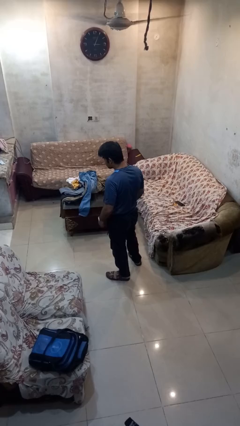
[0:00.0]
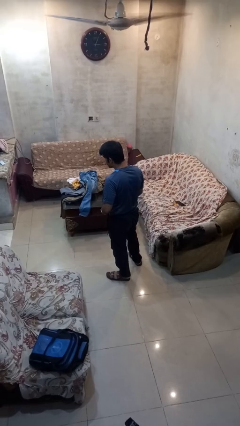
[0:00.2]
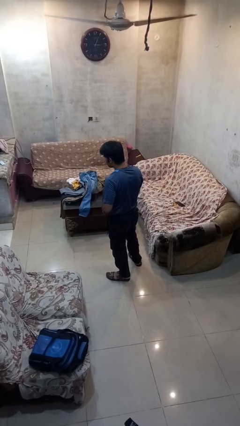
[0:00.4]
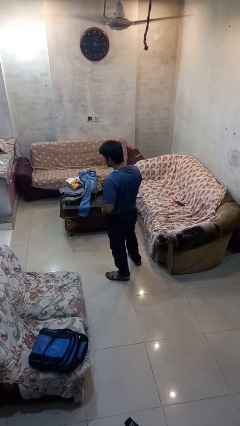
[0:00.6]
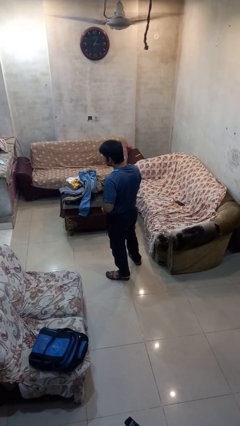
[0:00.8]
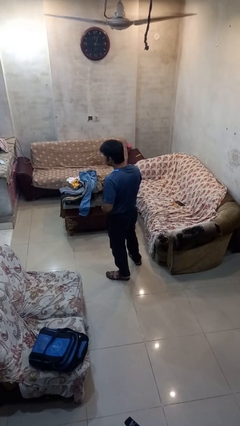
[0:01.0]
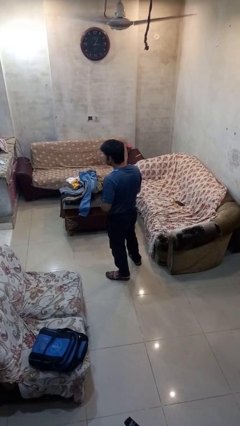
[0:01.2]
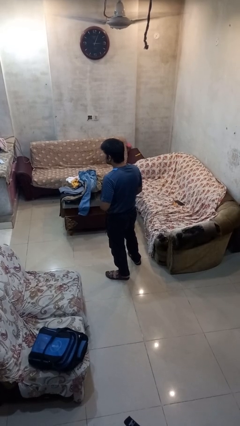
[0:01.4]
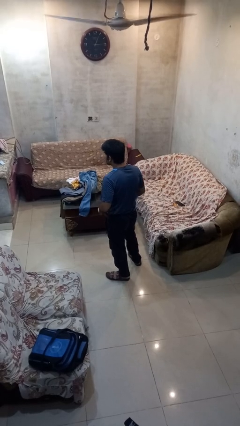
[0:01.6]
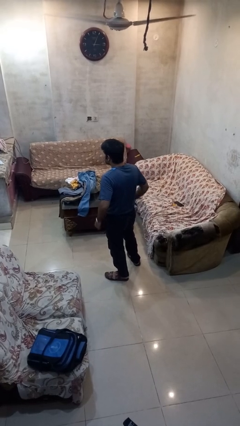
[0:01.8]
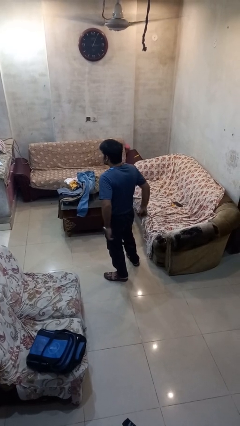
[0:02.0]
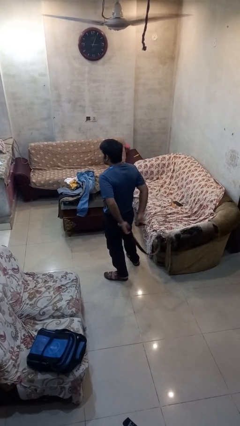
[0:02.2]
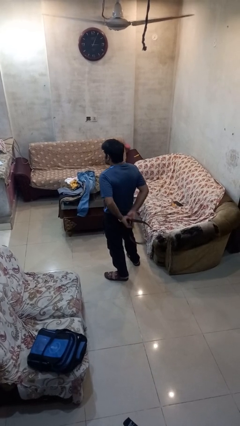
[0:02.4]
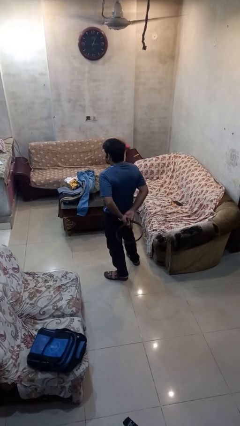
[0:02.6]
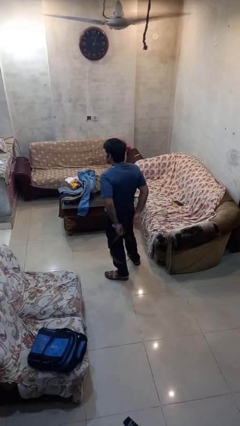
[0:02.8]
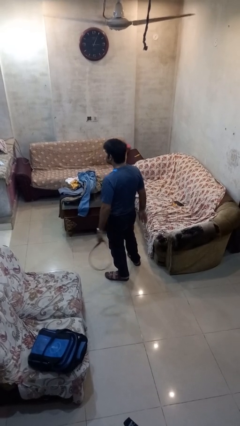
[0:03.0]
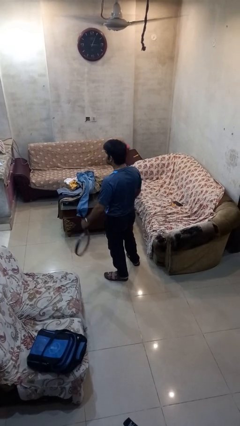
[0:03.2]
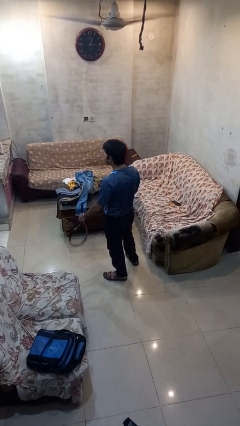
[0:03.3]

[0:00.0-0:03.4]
person takes off belt

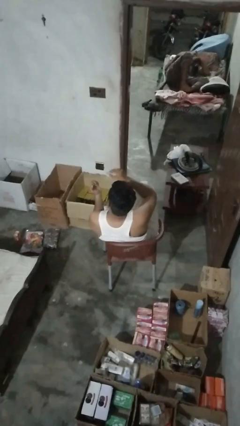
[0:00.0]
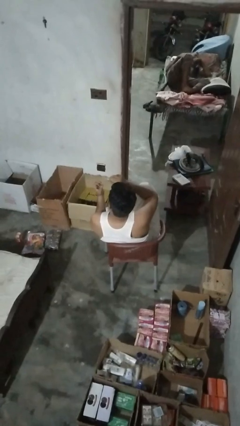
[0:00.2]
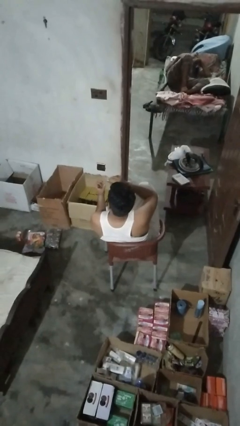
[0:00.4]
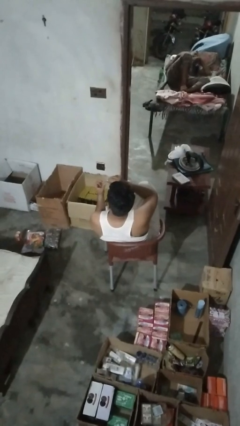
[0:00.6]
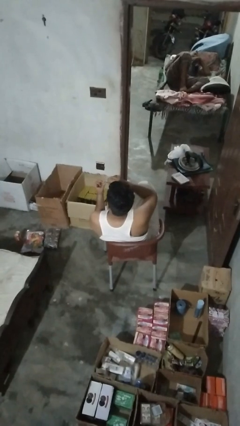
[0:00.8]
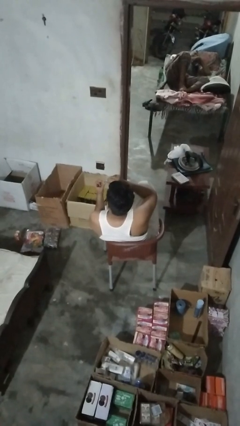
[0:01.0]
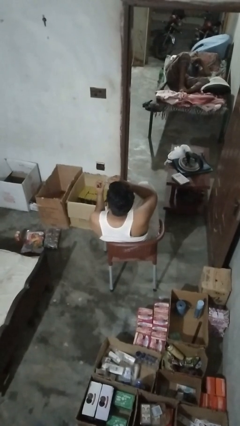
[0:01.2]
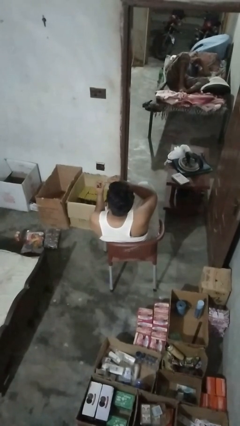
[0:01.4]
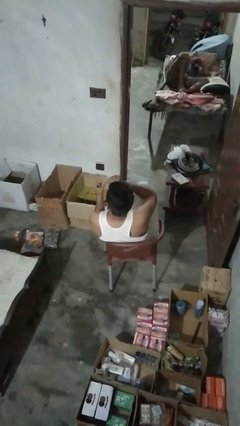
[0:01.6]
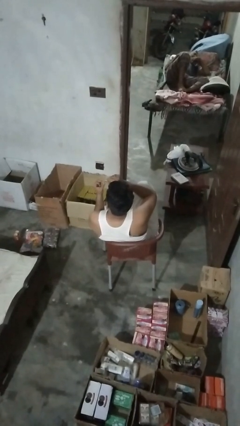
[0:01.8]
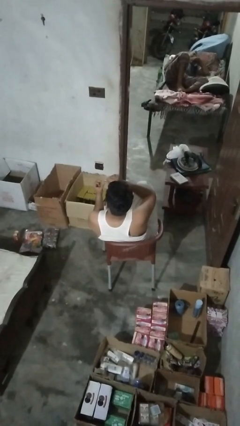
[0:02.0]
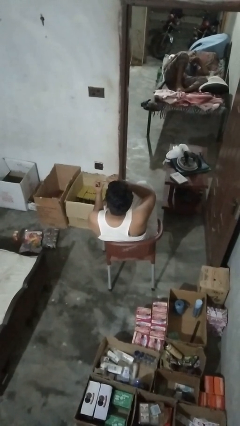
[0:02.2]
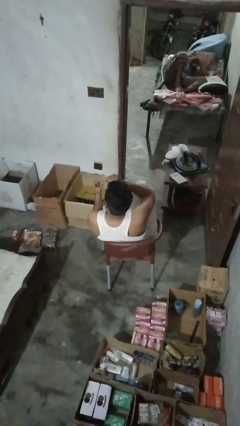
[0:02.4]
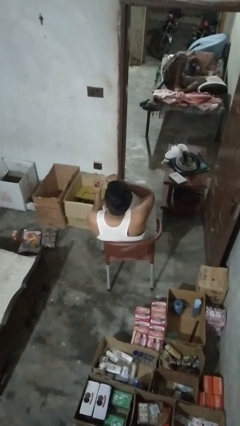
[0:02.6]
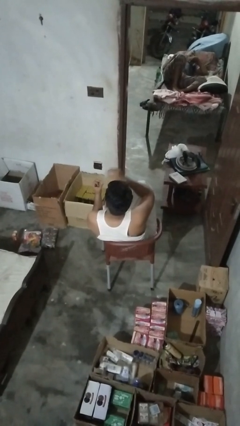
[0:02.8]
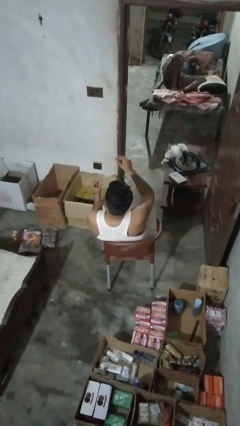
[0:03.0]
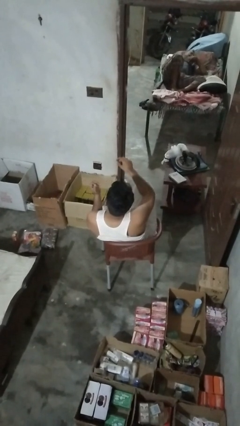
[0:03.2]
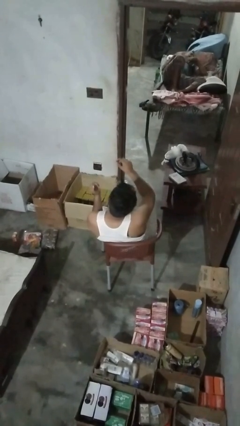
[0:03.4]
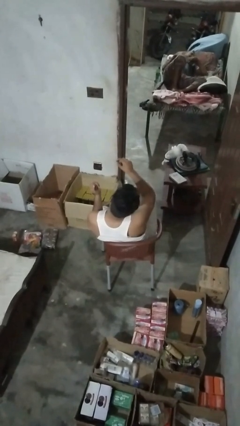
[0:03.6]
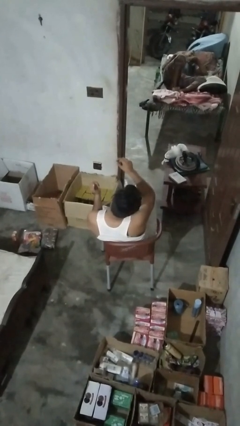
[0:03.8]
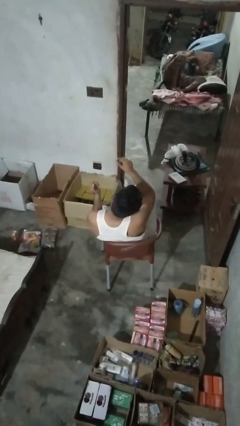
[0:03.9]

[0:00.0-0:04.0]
person clips fingernails

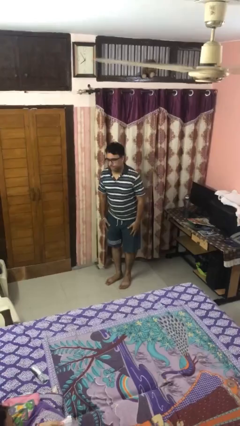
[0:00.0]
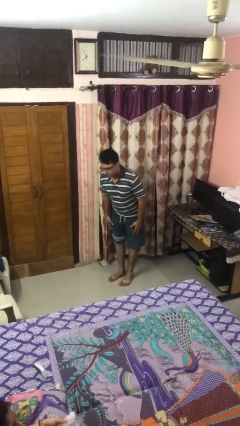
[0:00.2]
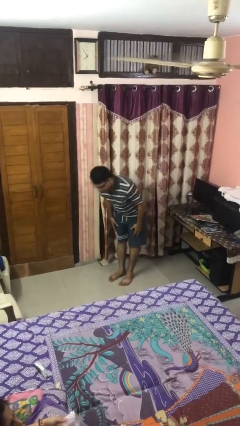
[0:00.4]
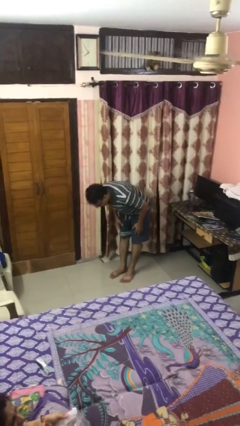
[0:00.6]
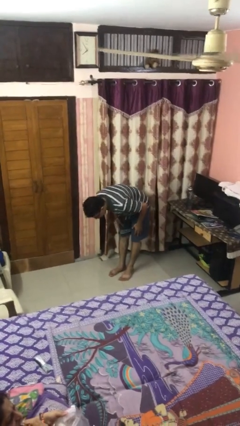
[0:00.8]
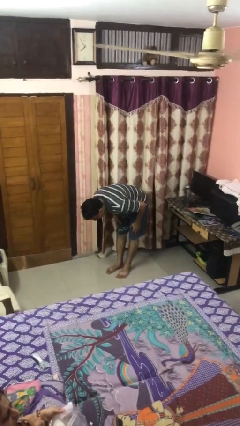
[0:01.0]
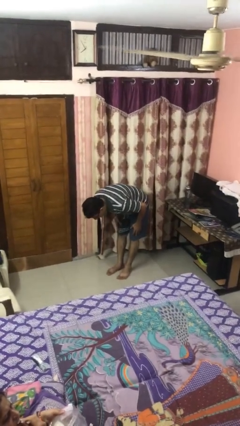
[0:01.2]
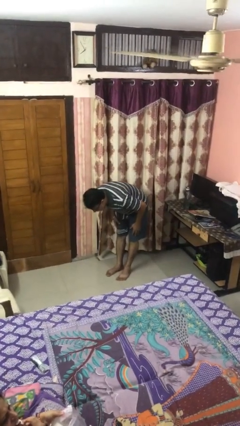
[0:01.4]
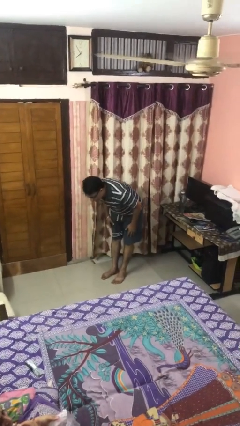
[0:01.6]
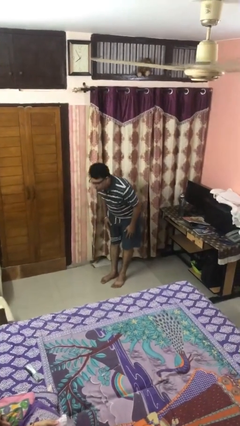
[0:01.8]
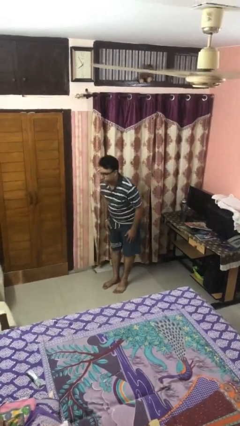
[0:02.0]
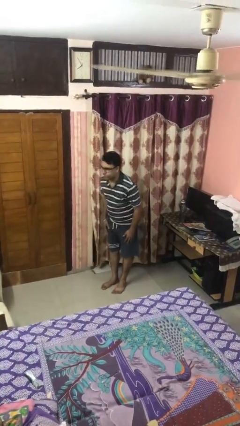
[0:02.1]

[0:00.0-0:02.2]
person bows

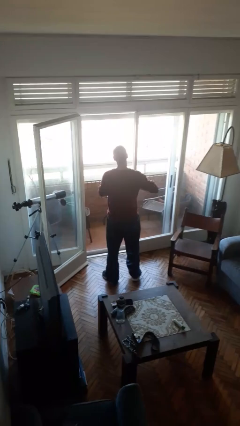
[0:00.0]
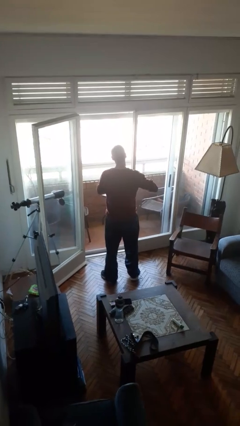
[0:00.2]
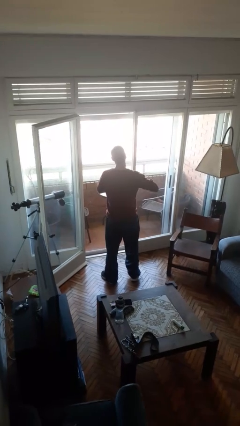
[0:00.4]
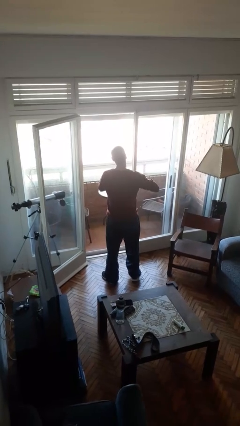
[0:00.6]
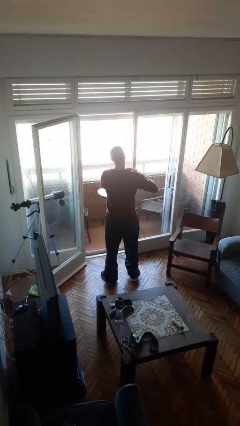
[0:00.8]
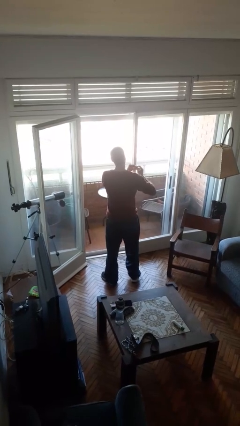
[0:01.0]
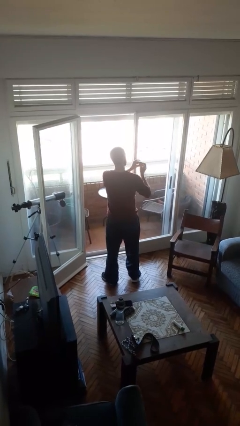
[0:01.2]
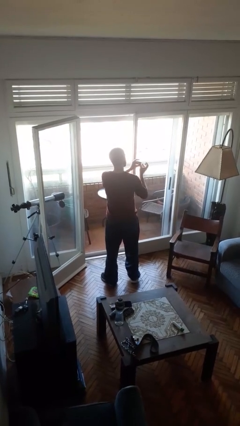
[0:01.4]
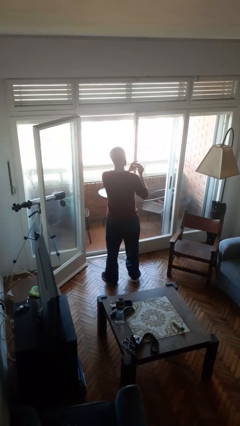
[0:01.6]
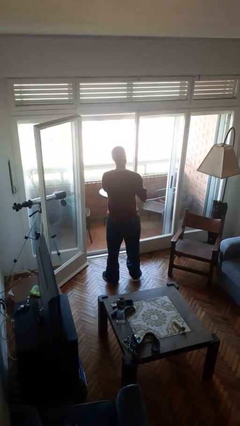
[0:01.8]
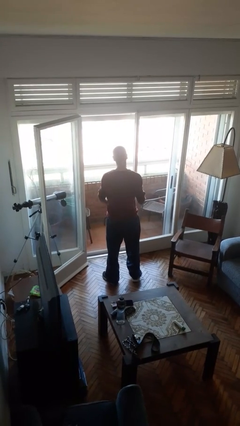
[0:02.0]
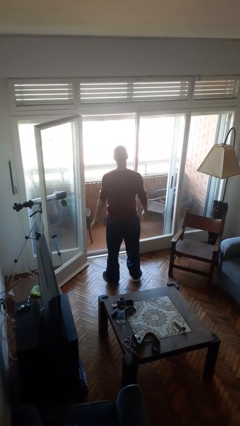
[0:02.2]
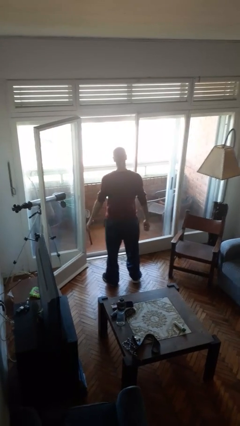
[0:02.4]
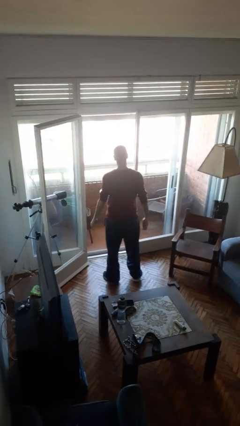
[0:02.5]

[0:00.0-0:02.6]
person takes off ring

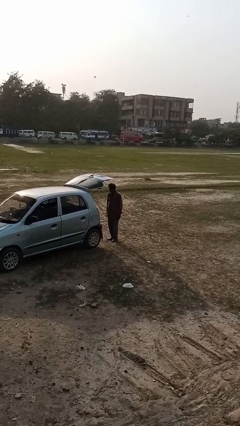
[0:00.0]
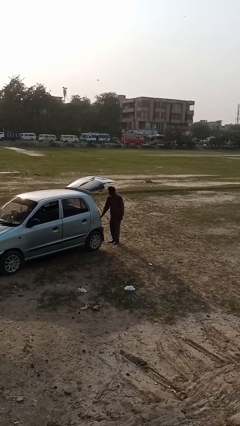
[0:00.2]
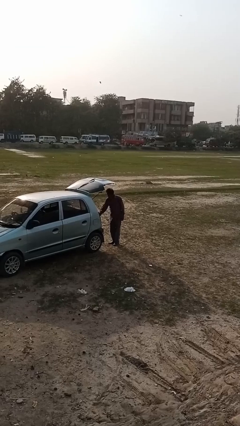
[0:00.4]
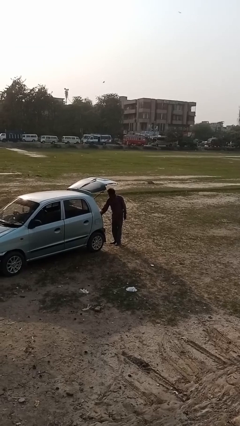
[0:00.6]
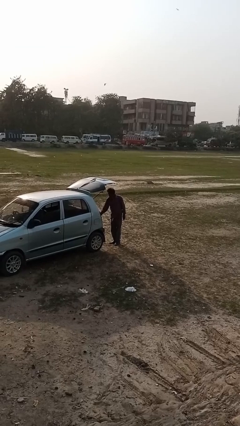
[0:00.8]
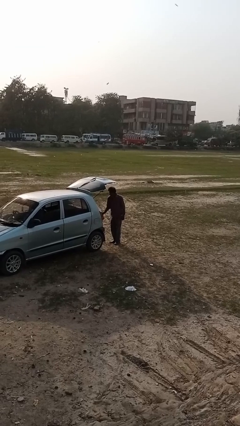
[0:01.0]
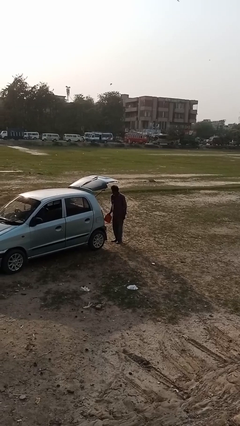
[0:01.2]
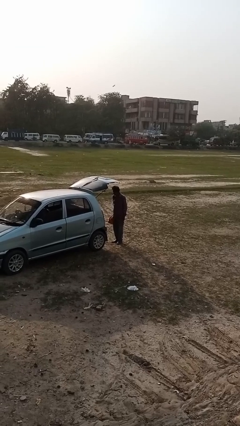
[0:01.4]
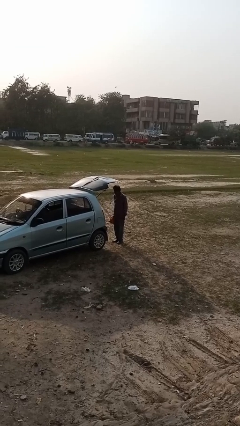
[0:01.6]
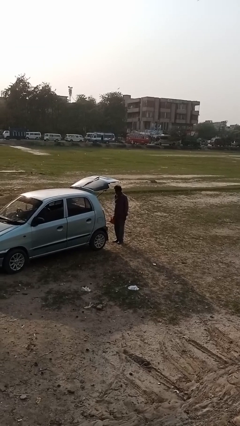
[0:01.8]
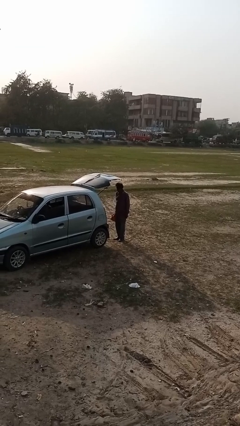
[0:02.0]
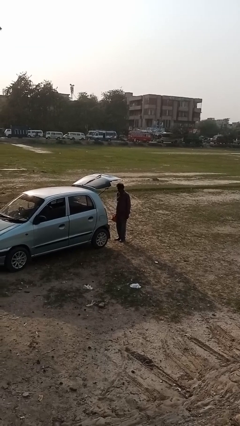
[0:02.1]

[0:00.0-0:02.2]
person unloads car

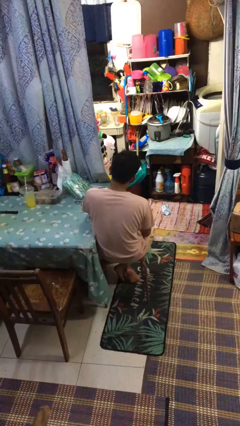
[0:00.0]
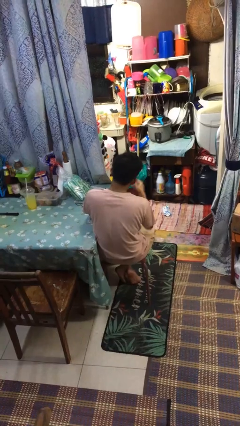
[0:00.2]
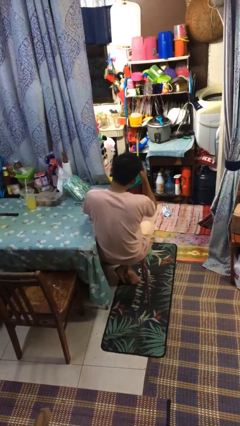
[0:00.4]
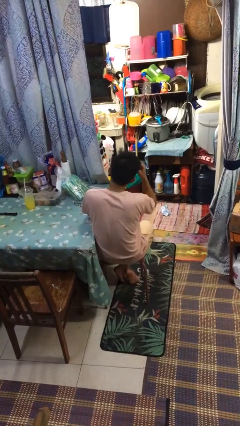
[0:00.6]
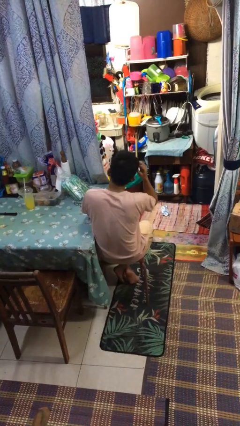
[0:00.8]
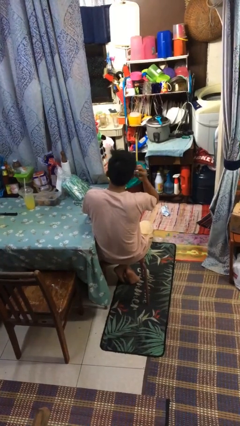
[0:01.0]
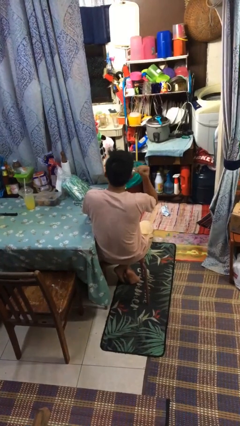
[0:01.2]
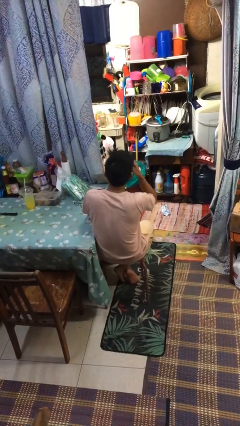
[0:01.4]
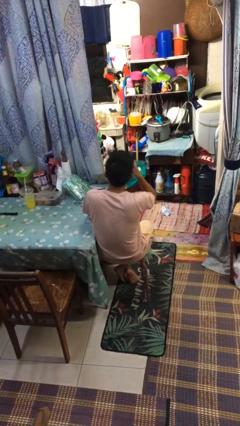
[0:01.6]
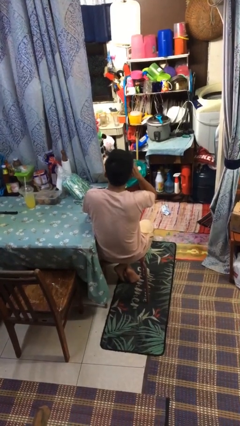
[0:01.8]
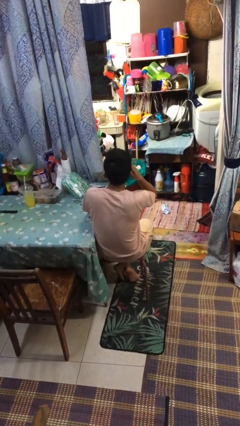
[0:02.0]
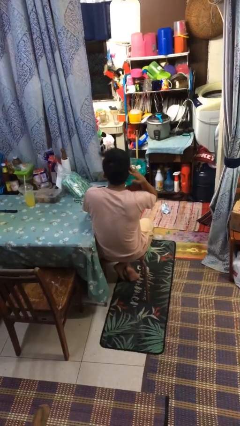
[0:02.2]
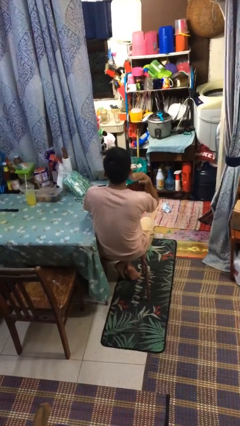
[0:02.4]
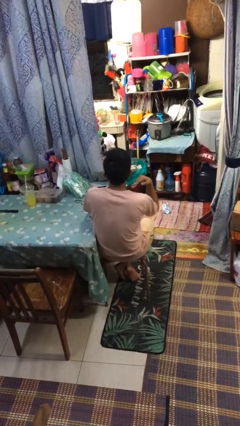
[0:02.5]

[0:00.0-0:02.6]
person strokes hair
